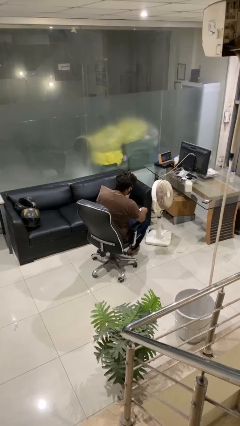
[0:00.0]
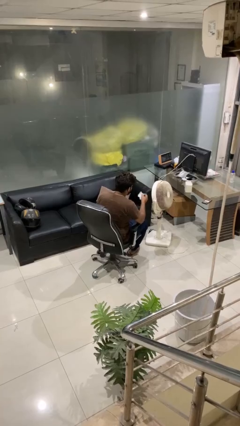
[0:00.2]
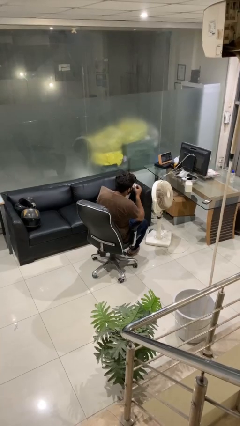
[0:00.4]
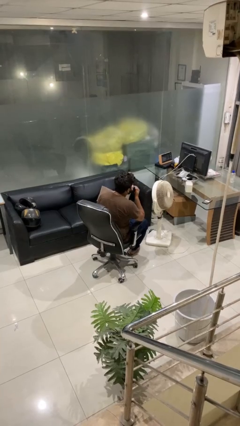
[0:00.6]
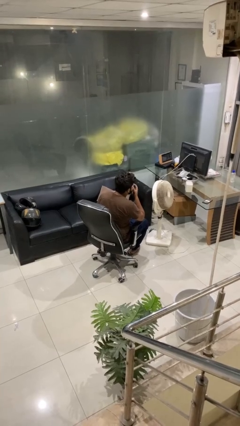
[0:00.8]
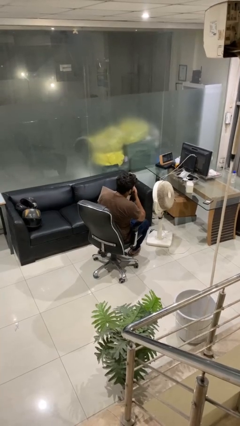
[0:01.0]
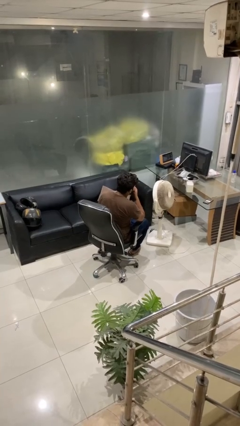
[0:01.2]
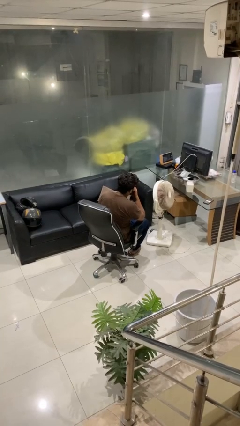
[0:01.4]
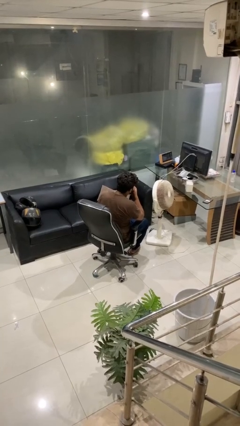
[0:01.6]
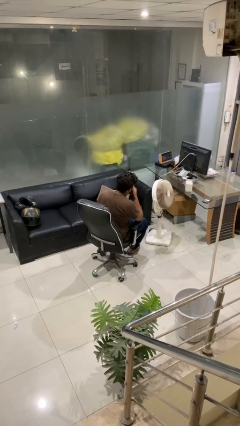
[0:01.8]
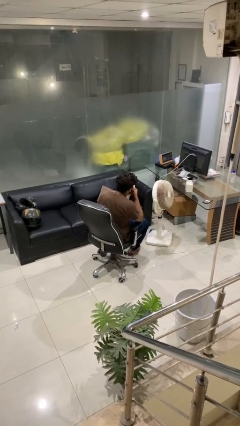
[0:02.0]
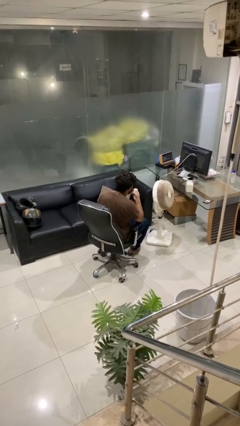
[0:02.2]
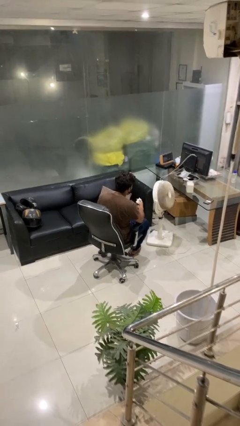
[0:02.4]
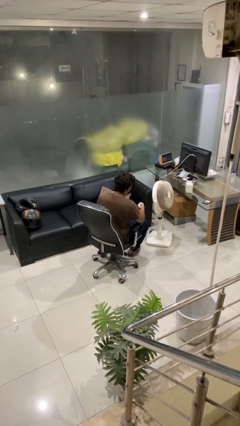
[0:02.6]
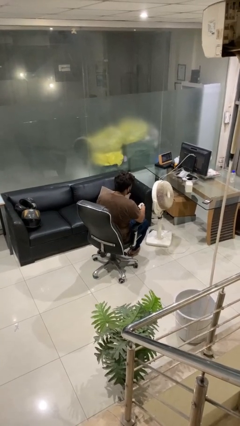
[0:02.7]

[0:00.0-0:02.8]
person blows nose

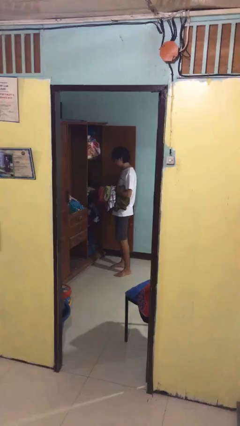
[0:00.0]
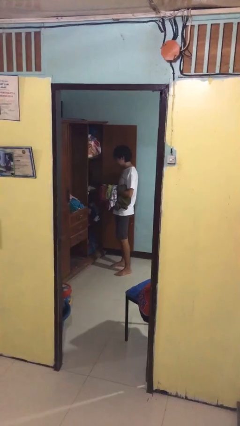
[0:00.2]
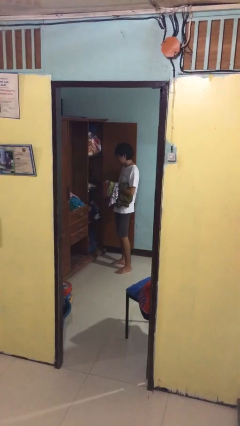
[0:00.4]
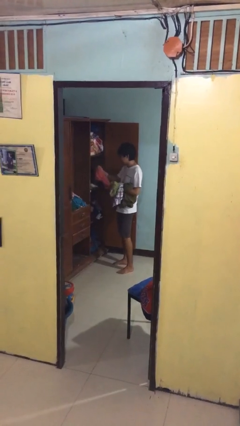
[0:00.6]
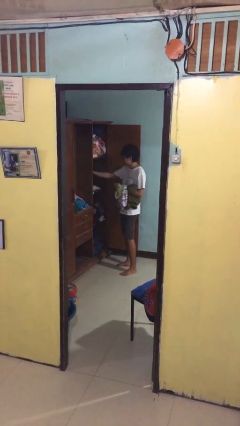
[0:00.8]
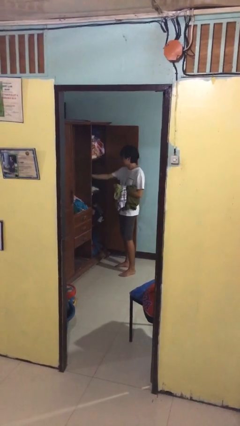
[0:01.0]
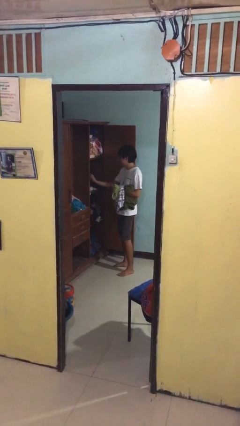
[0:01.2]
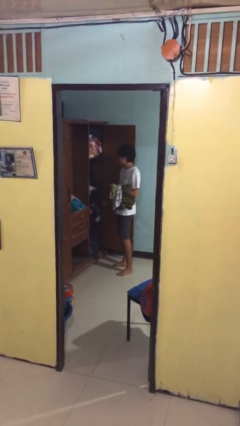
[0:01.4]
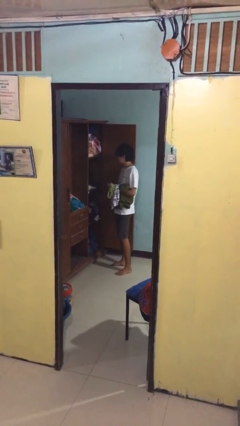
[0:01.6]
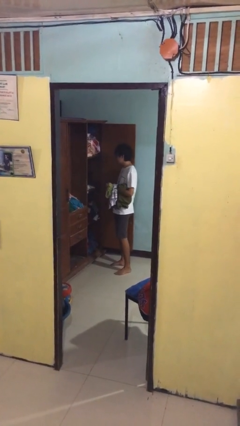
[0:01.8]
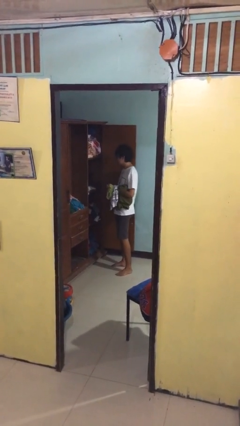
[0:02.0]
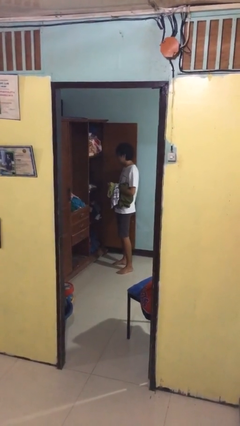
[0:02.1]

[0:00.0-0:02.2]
person puts clothes into dresser

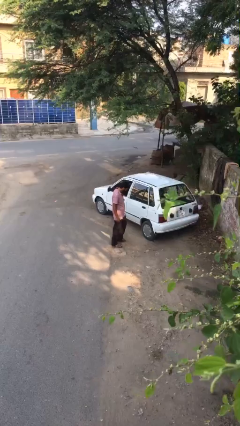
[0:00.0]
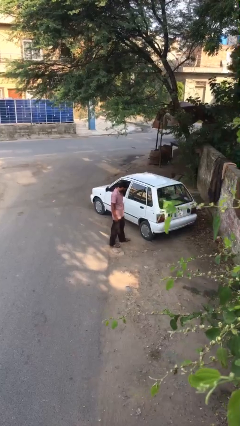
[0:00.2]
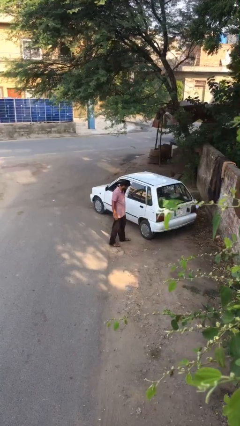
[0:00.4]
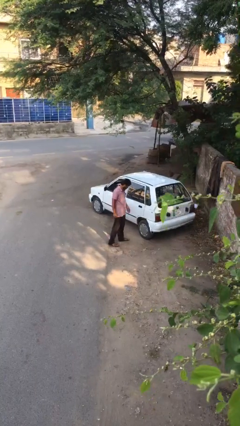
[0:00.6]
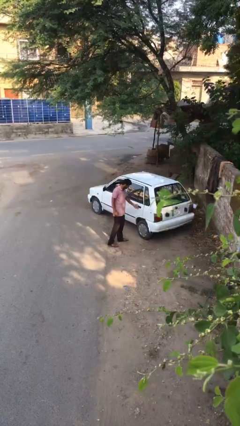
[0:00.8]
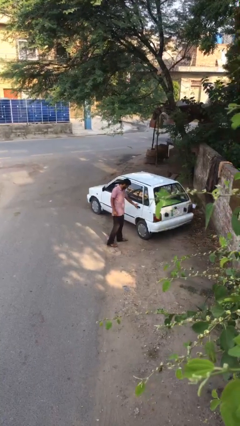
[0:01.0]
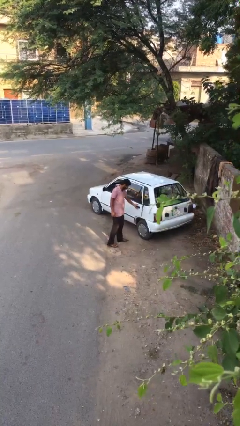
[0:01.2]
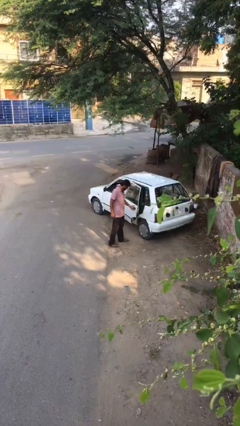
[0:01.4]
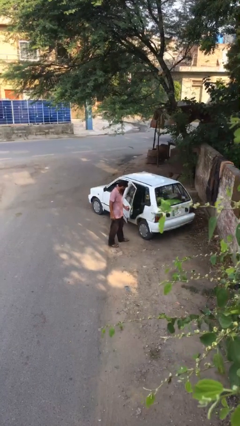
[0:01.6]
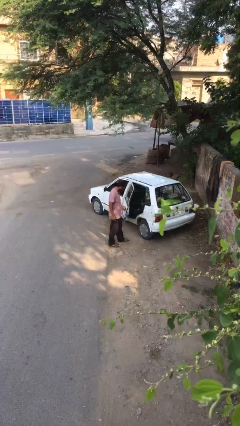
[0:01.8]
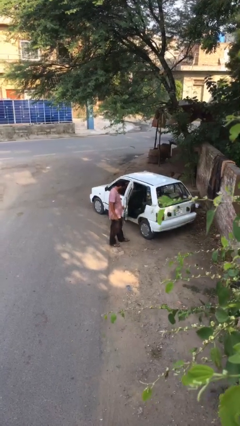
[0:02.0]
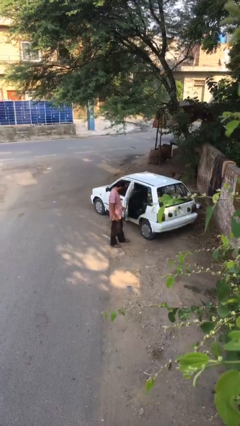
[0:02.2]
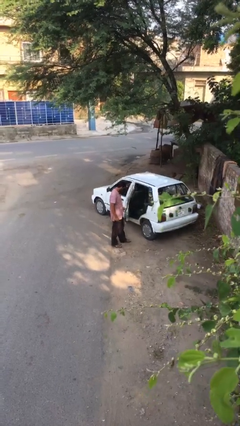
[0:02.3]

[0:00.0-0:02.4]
person opens car door

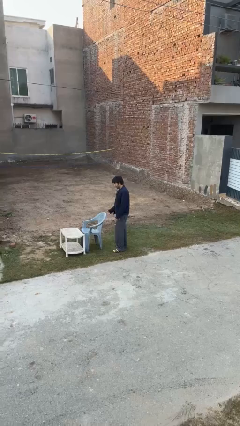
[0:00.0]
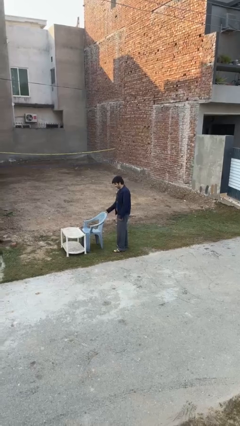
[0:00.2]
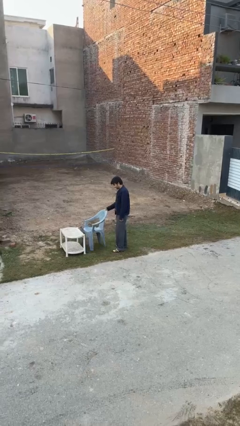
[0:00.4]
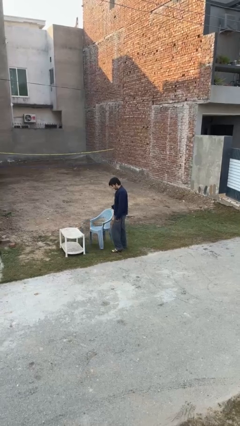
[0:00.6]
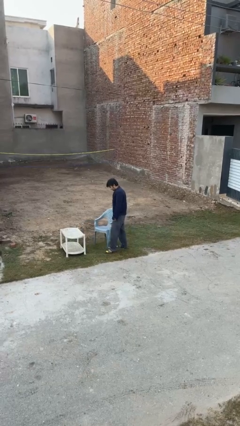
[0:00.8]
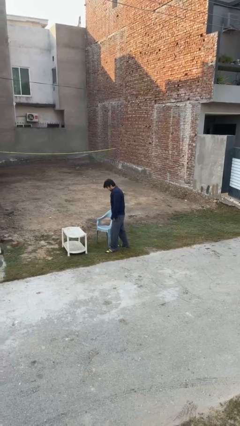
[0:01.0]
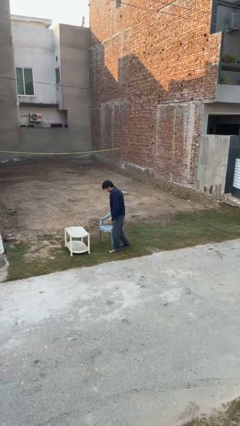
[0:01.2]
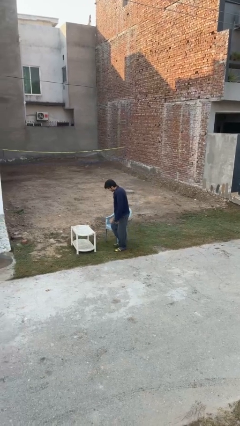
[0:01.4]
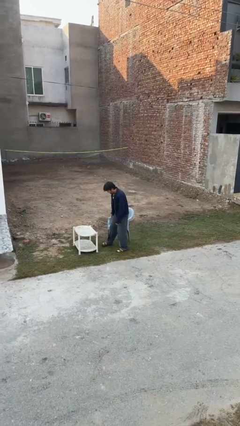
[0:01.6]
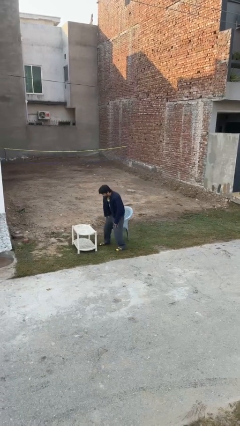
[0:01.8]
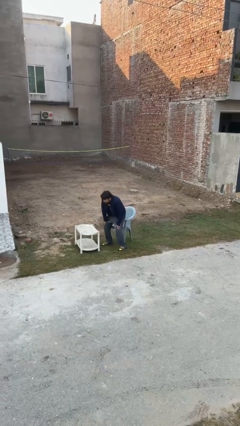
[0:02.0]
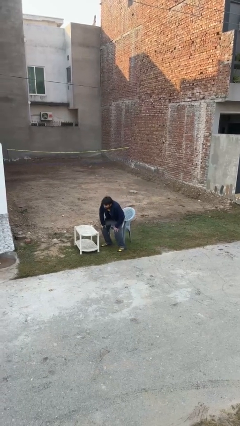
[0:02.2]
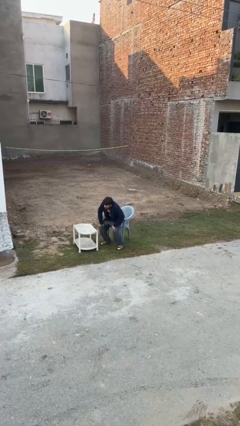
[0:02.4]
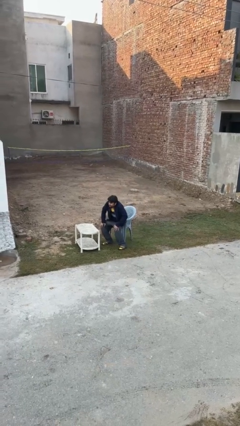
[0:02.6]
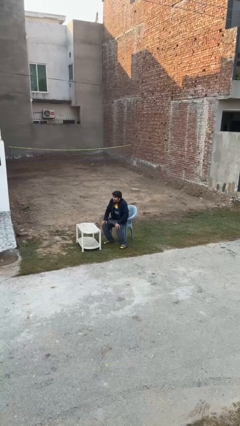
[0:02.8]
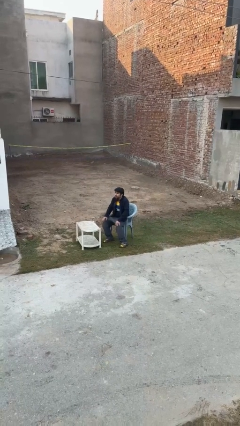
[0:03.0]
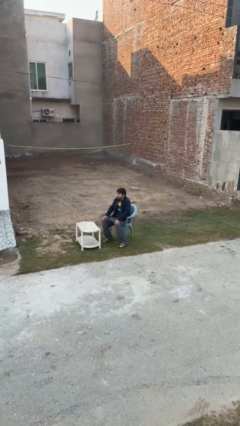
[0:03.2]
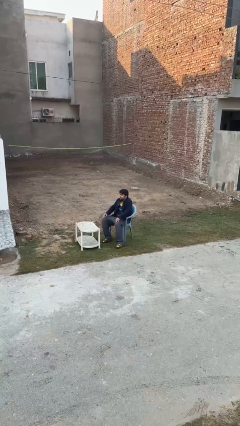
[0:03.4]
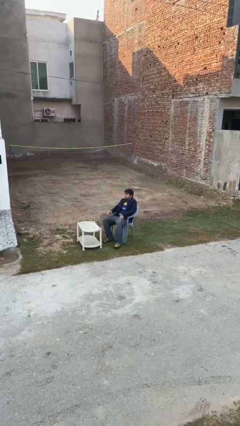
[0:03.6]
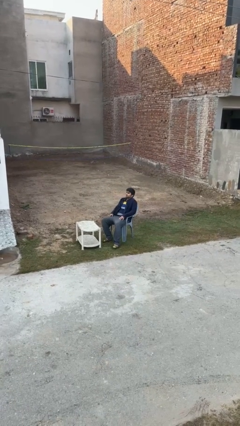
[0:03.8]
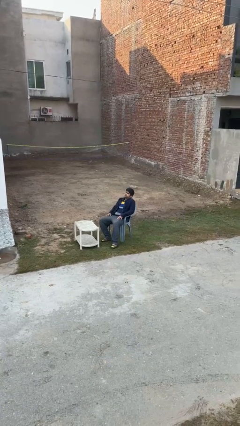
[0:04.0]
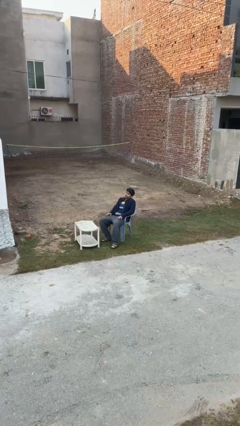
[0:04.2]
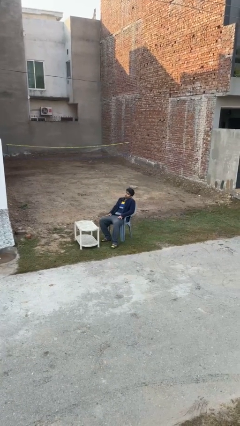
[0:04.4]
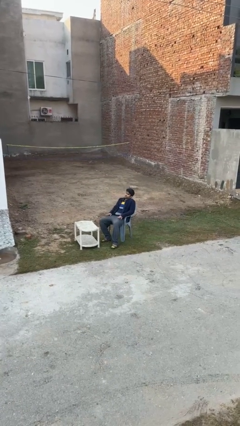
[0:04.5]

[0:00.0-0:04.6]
person sits down

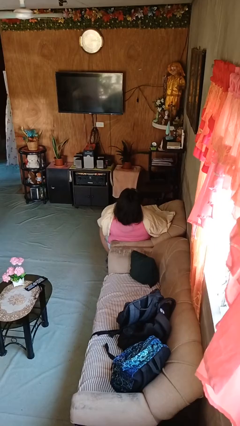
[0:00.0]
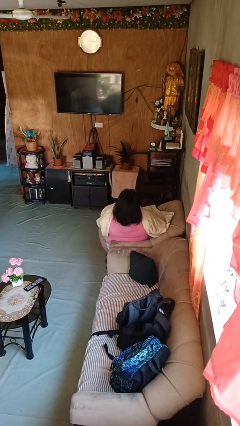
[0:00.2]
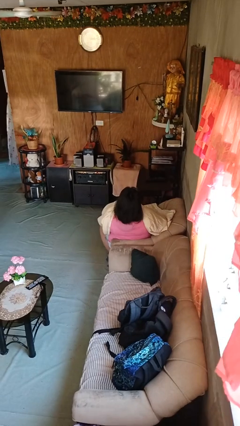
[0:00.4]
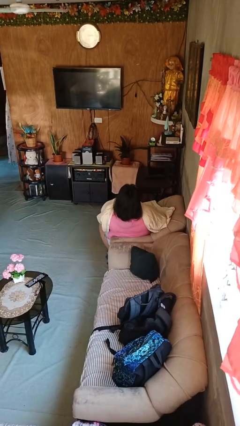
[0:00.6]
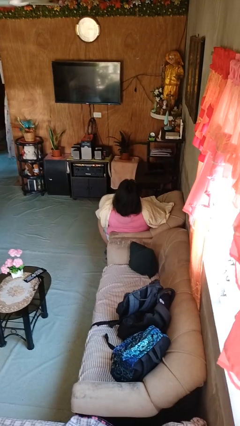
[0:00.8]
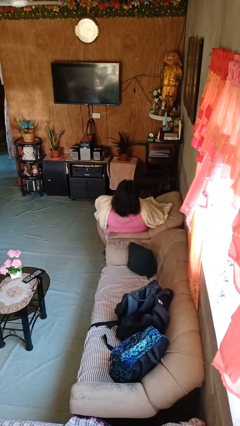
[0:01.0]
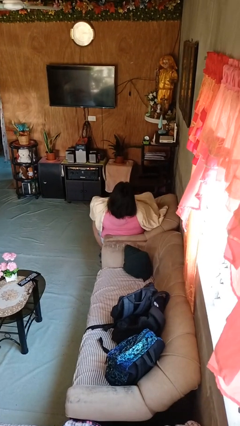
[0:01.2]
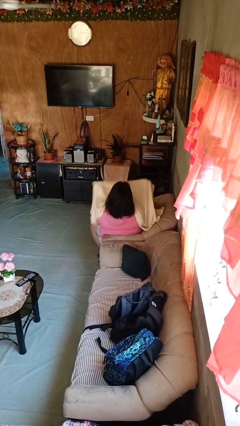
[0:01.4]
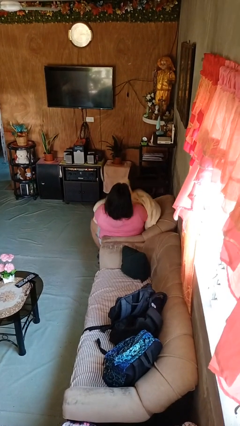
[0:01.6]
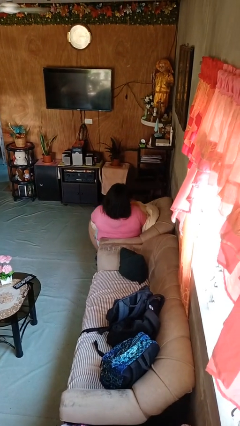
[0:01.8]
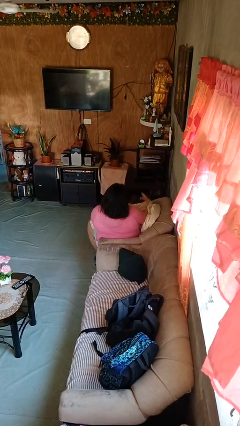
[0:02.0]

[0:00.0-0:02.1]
person uncovers with blanket

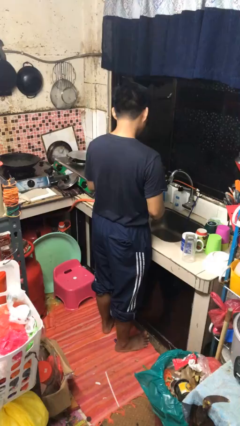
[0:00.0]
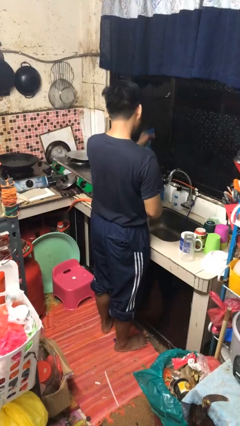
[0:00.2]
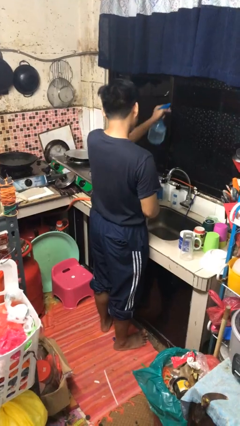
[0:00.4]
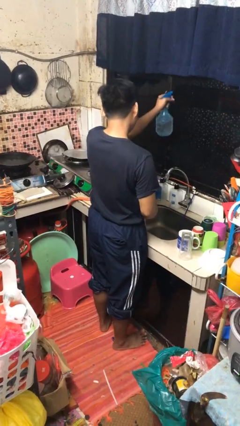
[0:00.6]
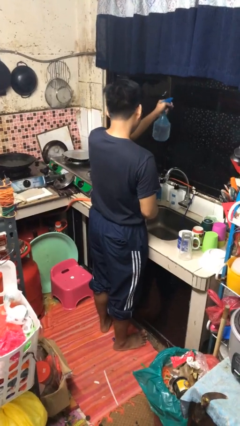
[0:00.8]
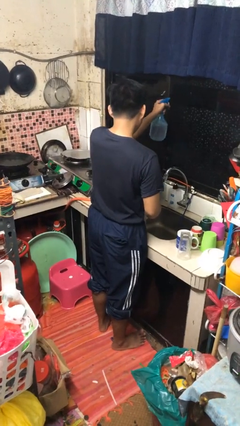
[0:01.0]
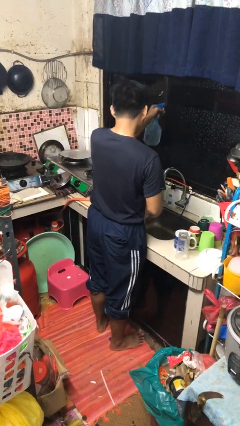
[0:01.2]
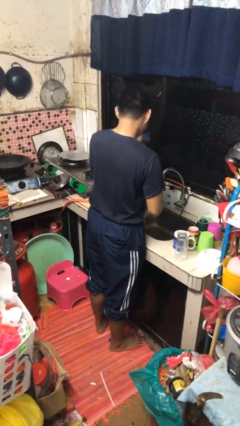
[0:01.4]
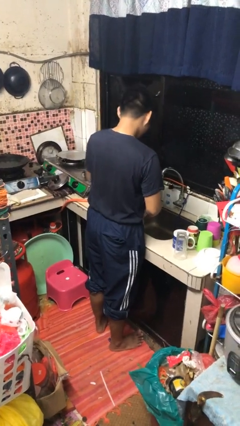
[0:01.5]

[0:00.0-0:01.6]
person sprays from bottle

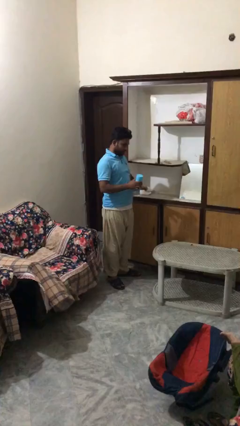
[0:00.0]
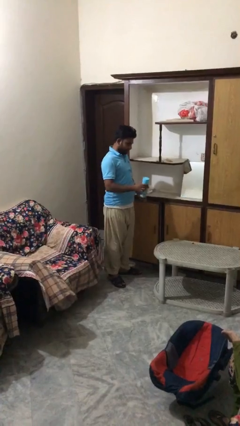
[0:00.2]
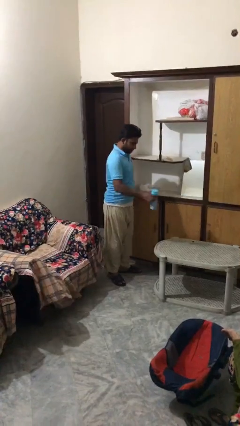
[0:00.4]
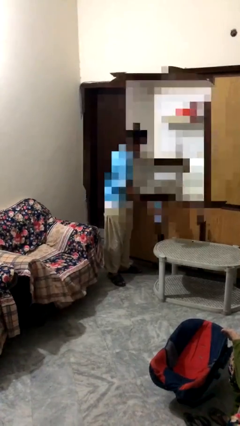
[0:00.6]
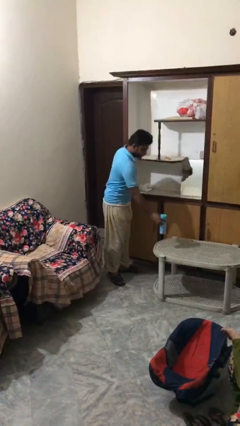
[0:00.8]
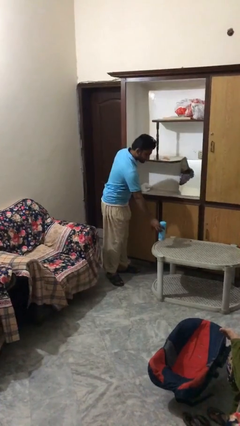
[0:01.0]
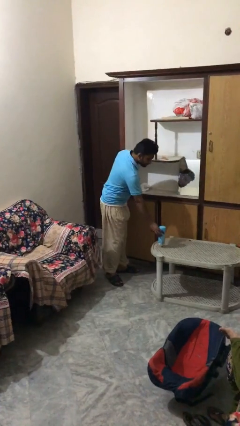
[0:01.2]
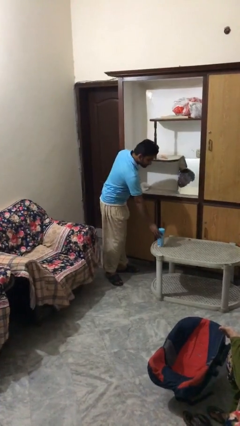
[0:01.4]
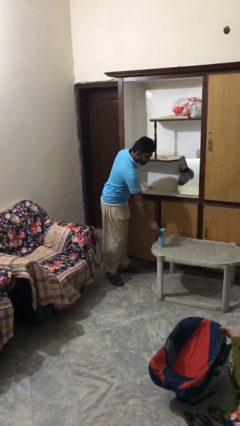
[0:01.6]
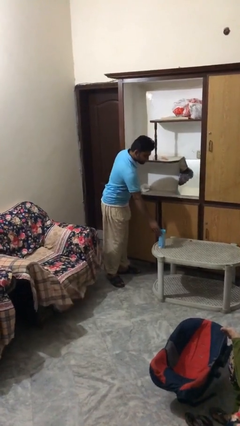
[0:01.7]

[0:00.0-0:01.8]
person puts down object on table
